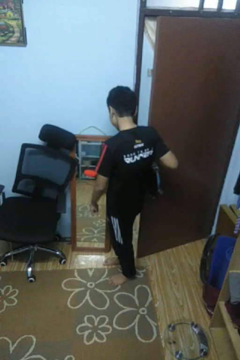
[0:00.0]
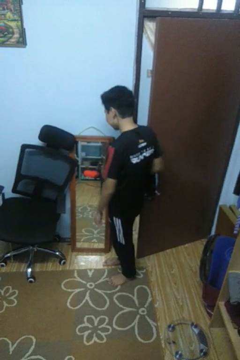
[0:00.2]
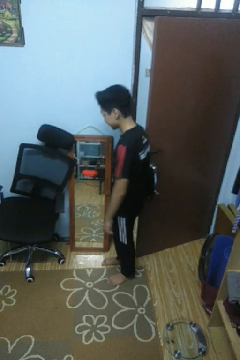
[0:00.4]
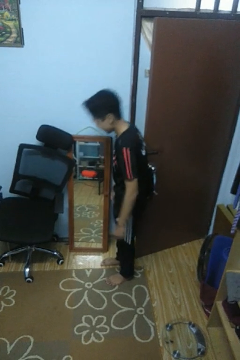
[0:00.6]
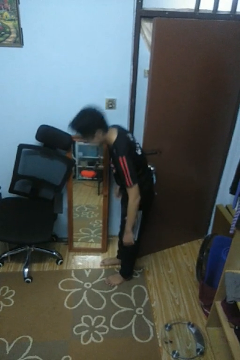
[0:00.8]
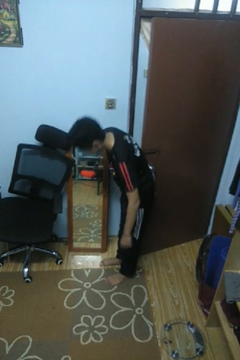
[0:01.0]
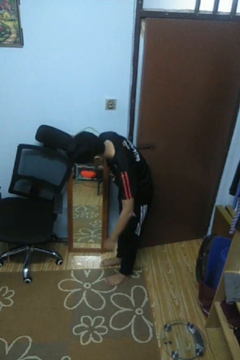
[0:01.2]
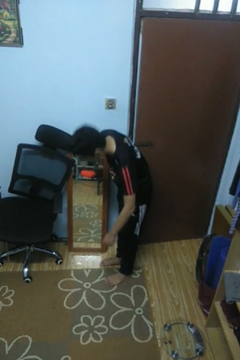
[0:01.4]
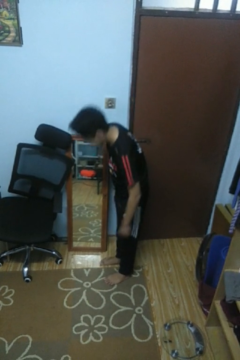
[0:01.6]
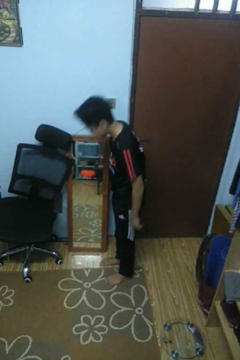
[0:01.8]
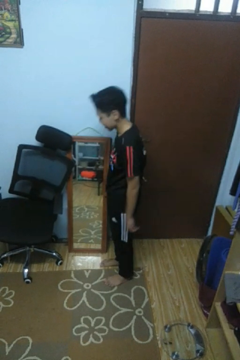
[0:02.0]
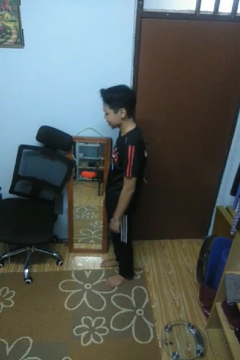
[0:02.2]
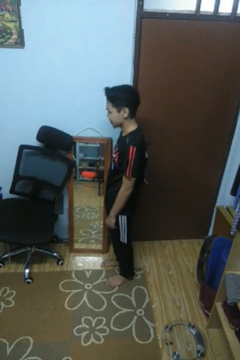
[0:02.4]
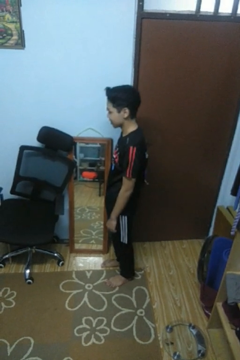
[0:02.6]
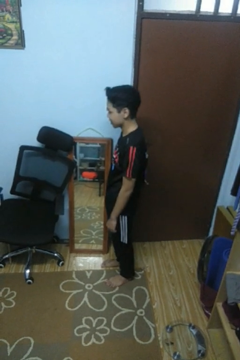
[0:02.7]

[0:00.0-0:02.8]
person closes door with hip

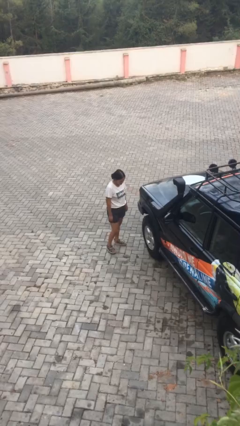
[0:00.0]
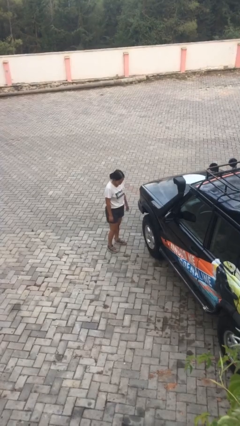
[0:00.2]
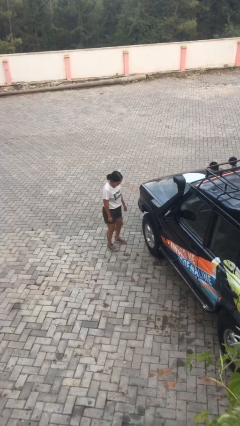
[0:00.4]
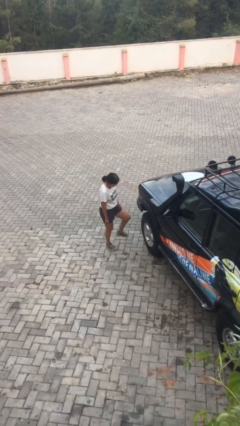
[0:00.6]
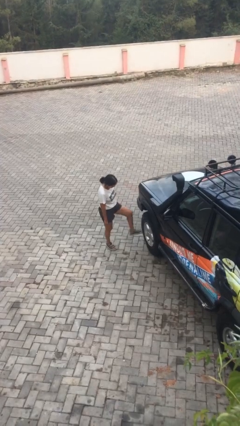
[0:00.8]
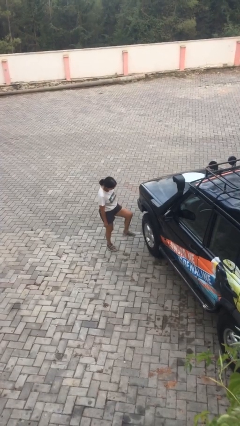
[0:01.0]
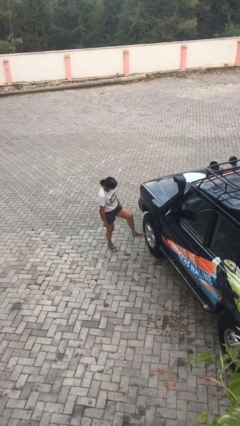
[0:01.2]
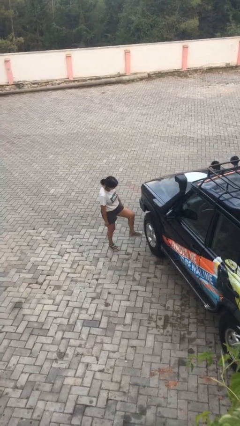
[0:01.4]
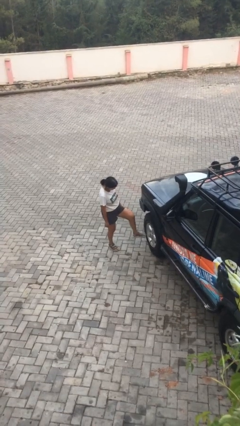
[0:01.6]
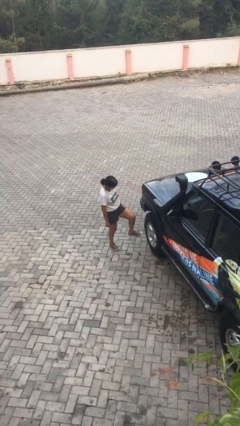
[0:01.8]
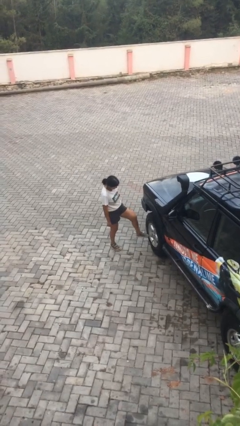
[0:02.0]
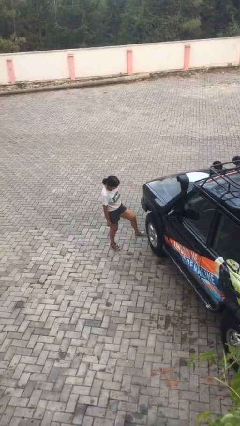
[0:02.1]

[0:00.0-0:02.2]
person kicks car tires

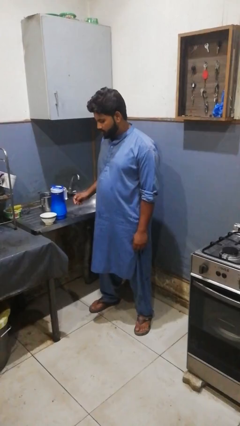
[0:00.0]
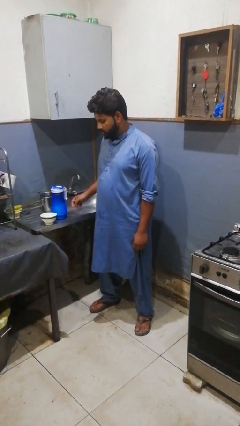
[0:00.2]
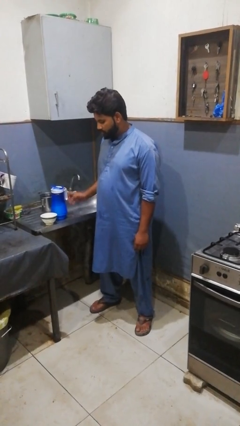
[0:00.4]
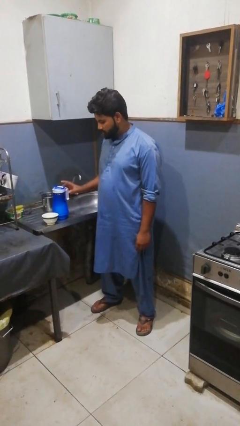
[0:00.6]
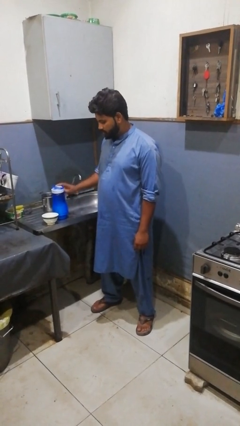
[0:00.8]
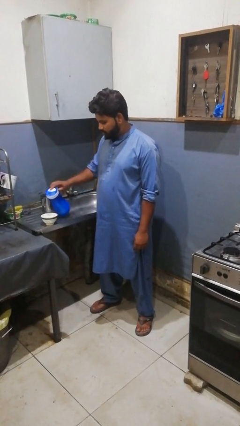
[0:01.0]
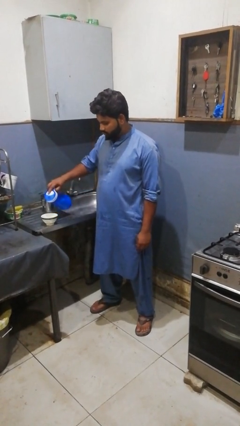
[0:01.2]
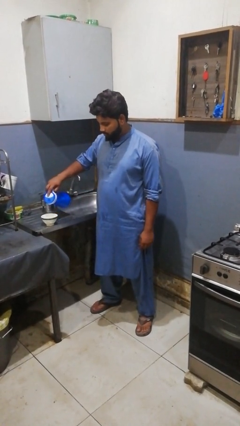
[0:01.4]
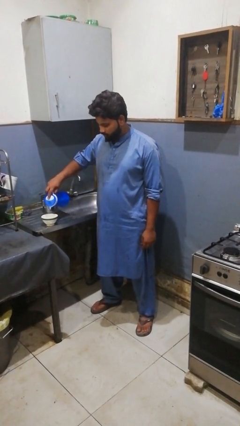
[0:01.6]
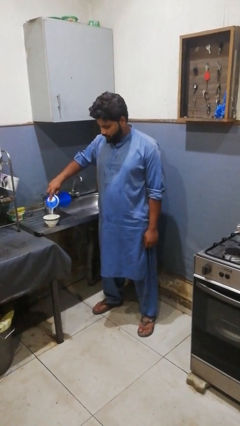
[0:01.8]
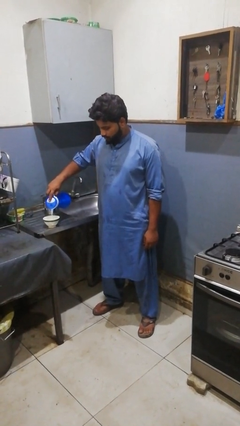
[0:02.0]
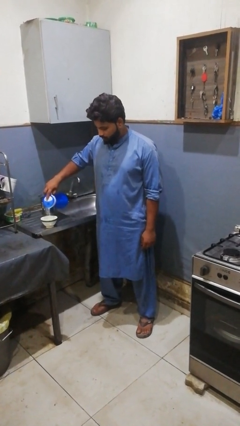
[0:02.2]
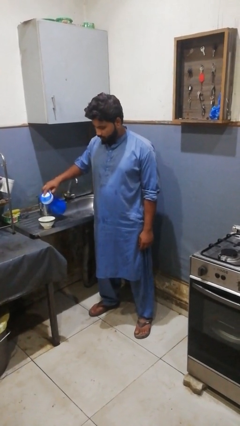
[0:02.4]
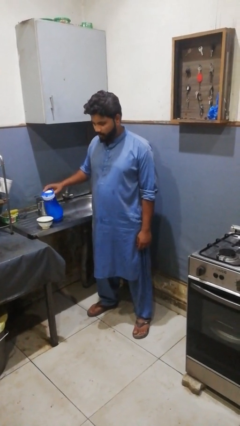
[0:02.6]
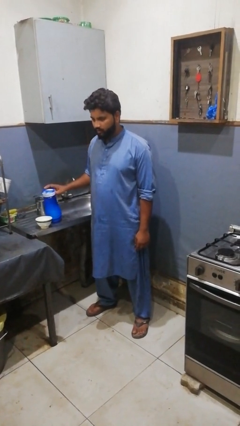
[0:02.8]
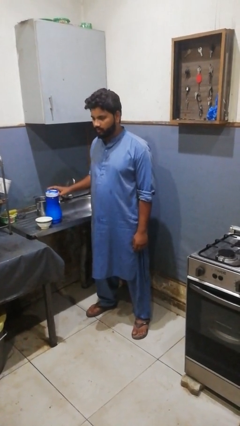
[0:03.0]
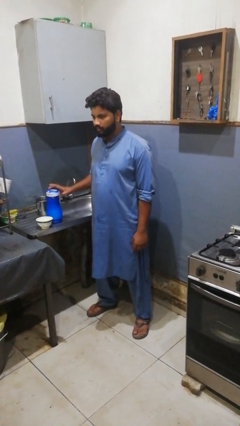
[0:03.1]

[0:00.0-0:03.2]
person pours into bowl

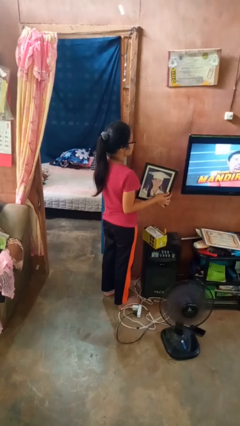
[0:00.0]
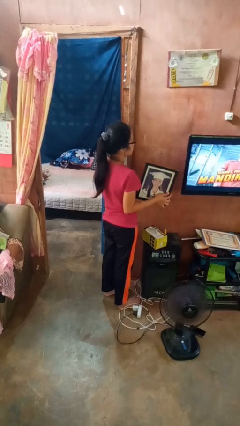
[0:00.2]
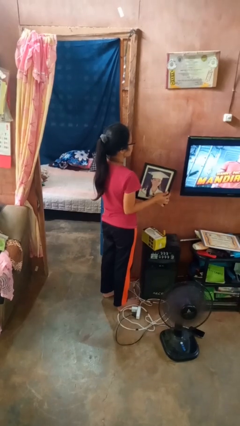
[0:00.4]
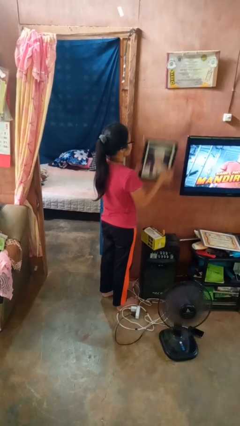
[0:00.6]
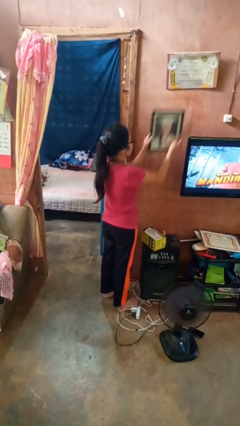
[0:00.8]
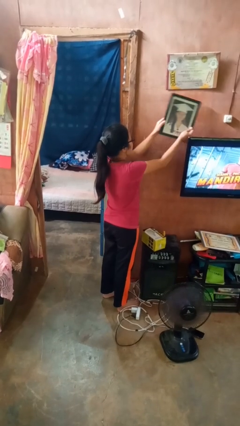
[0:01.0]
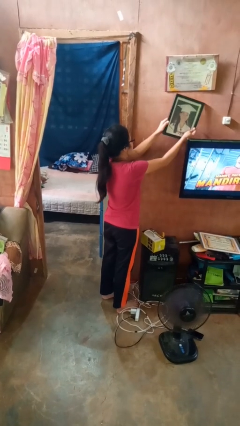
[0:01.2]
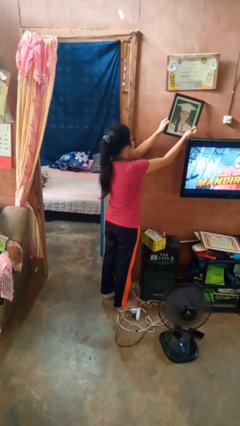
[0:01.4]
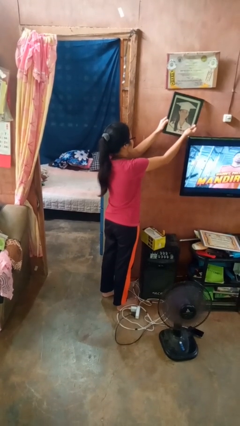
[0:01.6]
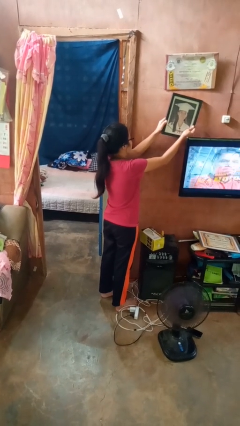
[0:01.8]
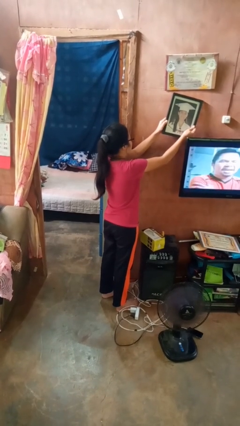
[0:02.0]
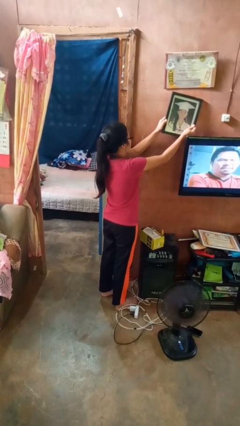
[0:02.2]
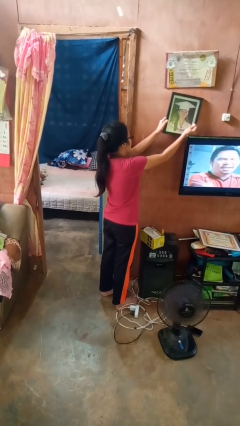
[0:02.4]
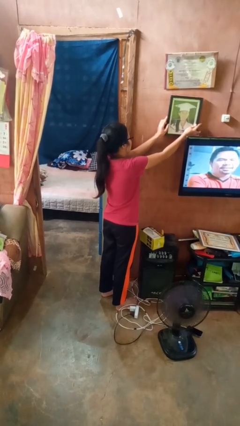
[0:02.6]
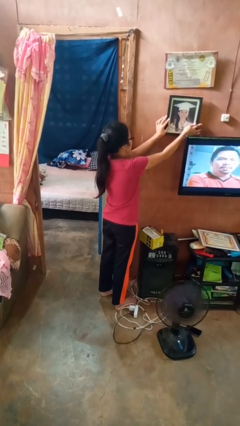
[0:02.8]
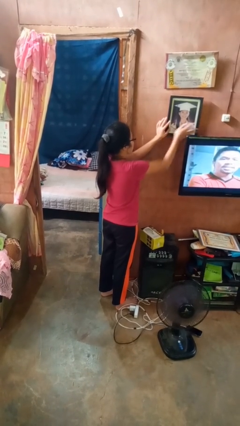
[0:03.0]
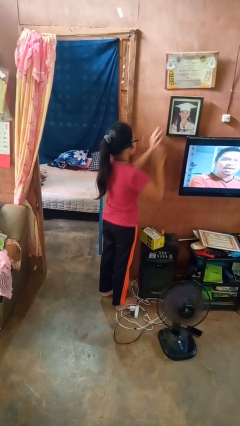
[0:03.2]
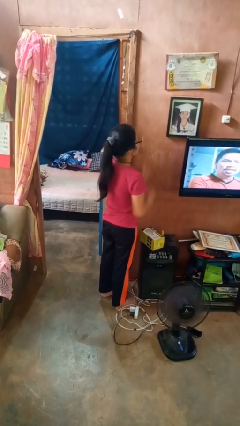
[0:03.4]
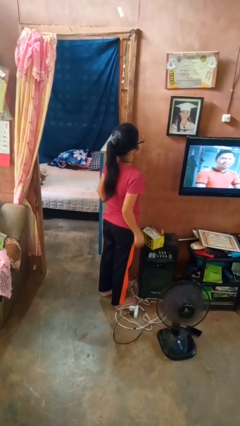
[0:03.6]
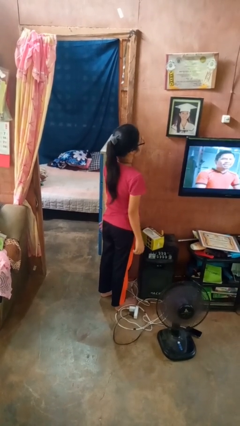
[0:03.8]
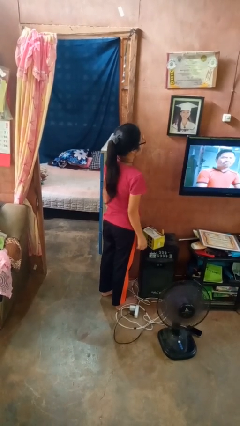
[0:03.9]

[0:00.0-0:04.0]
person puts up picture frame

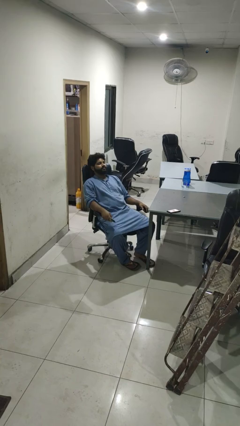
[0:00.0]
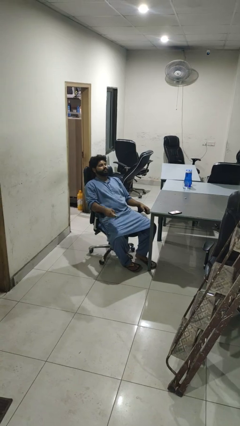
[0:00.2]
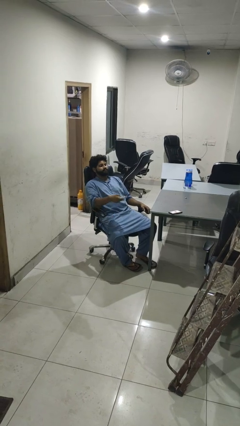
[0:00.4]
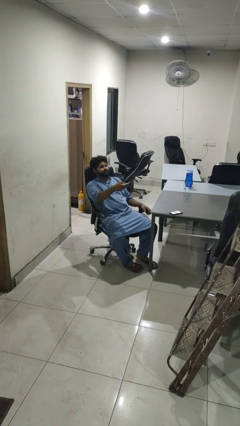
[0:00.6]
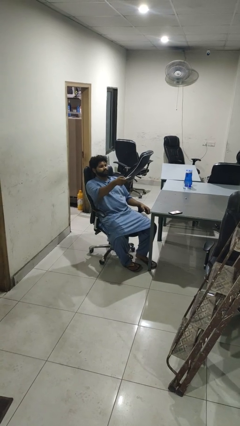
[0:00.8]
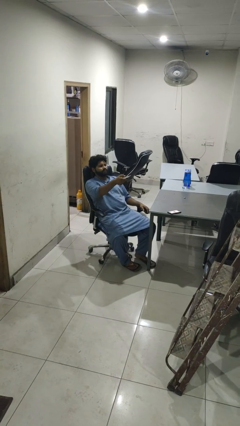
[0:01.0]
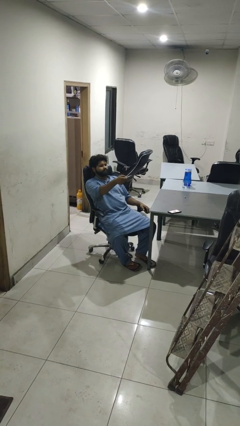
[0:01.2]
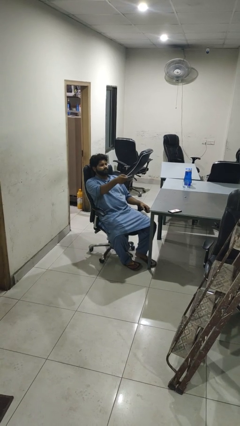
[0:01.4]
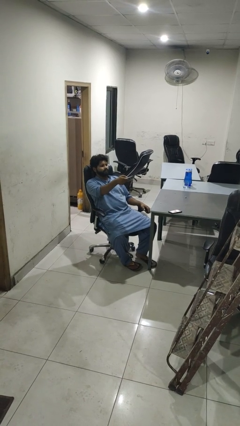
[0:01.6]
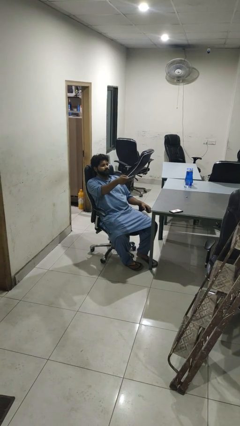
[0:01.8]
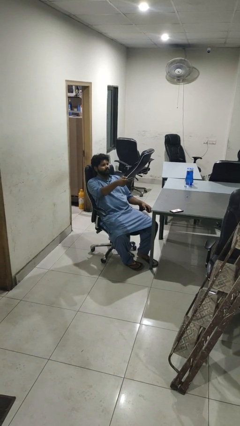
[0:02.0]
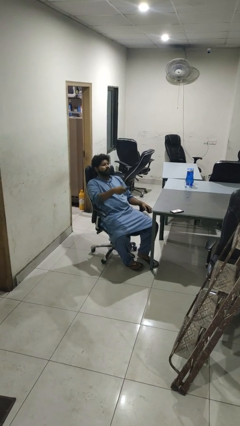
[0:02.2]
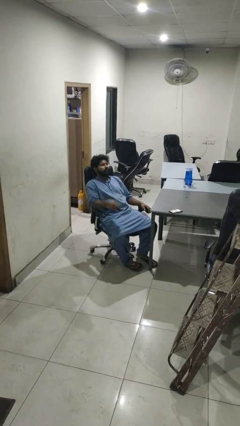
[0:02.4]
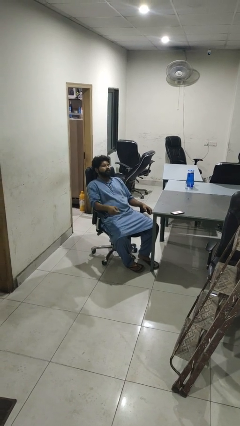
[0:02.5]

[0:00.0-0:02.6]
person uses television remote

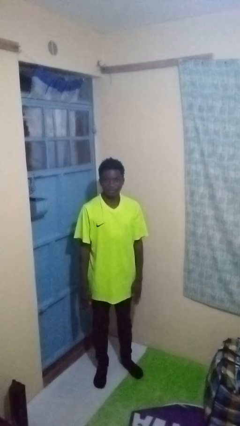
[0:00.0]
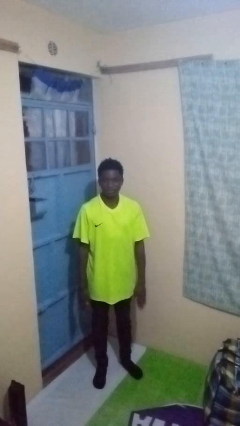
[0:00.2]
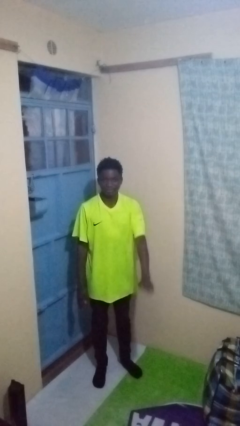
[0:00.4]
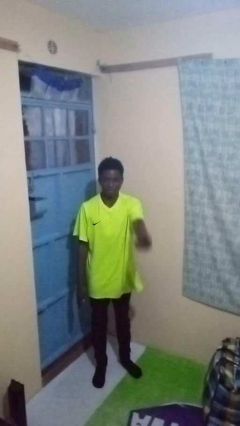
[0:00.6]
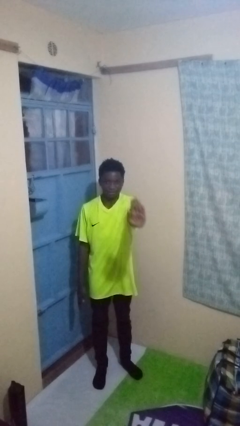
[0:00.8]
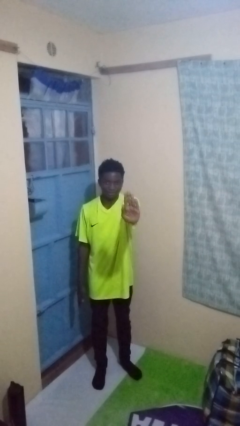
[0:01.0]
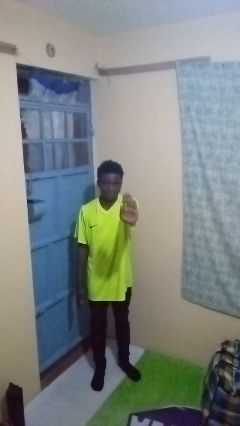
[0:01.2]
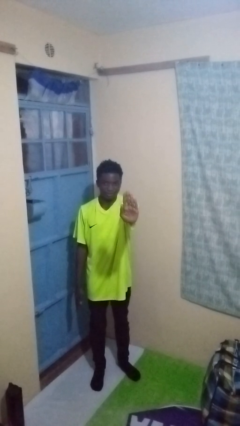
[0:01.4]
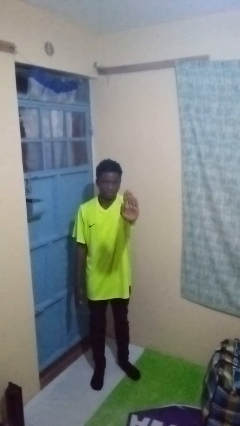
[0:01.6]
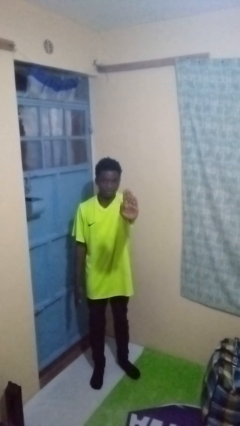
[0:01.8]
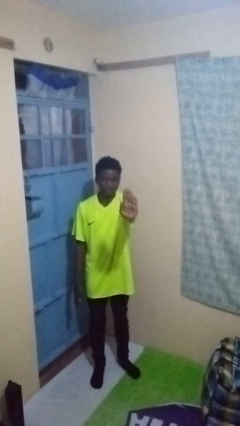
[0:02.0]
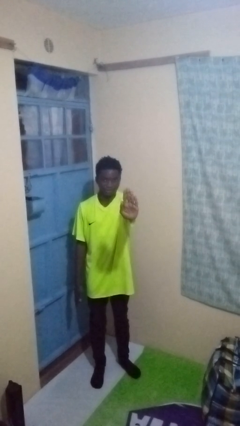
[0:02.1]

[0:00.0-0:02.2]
person gestures stop

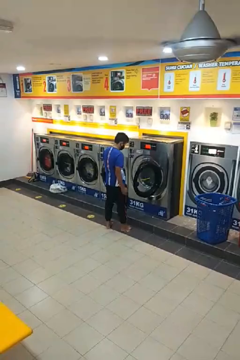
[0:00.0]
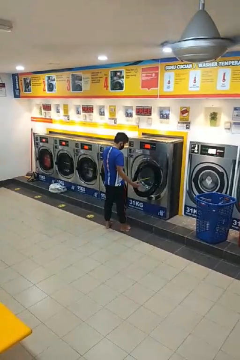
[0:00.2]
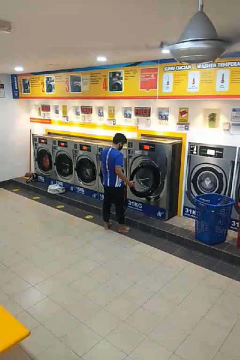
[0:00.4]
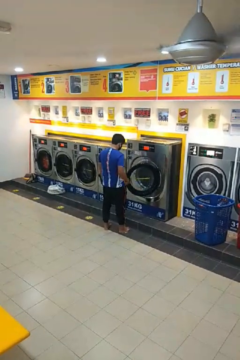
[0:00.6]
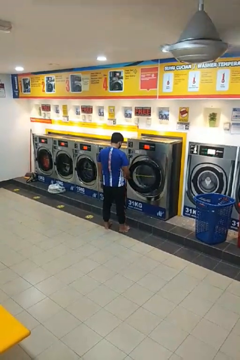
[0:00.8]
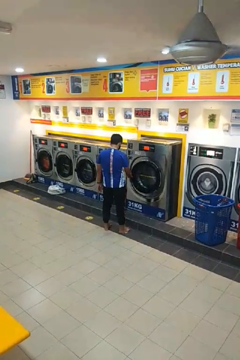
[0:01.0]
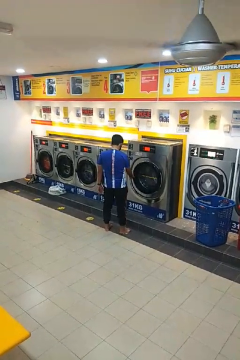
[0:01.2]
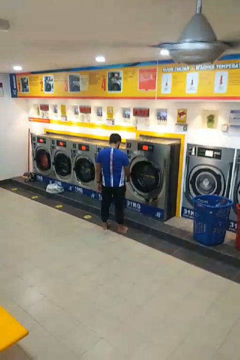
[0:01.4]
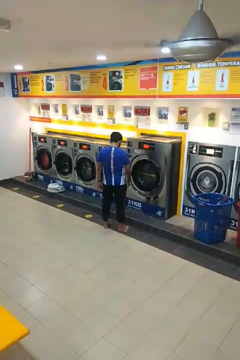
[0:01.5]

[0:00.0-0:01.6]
person closes clothes washer
